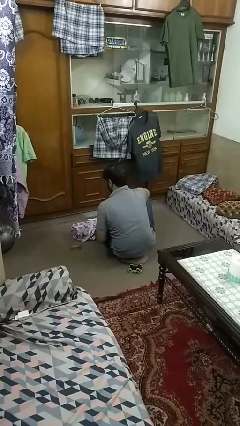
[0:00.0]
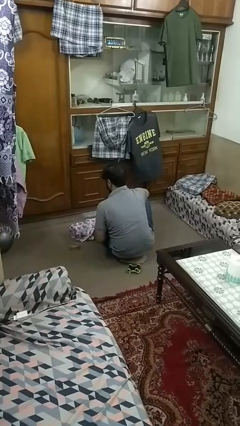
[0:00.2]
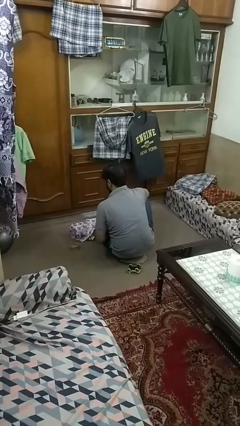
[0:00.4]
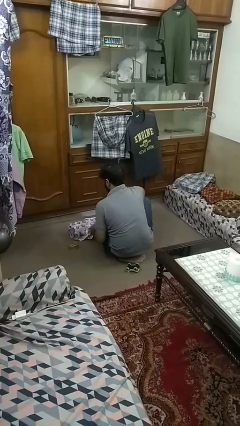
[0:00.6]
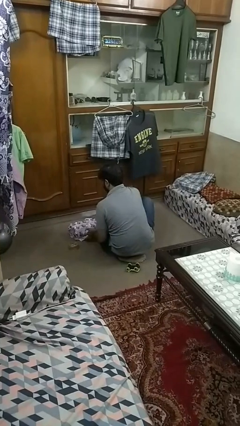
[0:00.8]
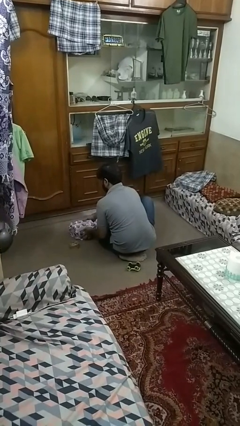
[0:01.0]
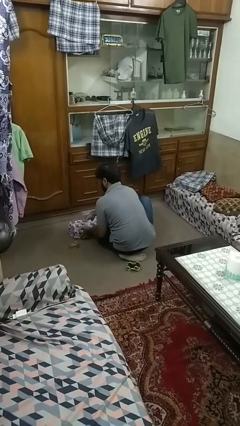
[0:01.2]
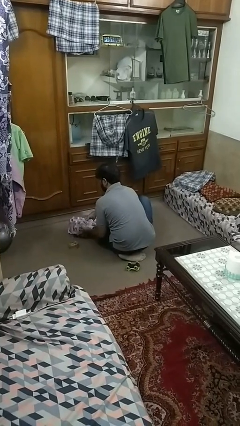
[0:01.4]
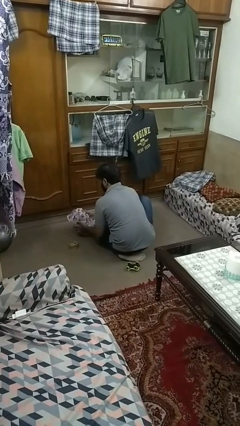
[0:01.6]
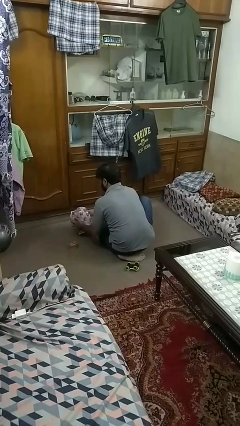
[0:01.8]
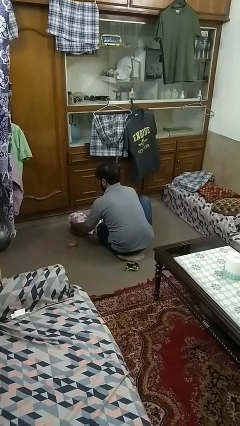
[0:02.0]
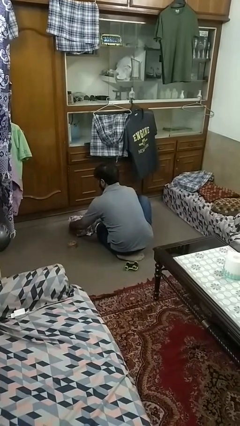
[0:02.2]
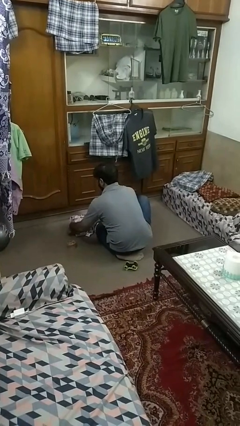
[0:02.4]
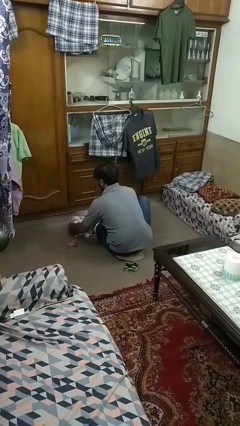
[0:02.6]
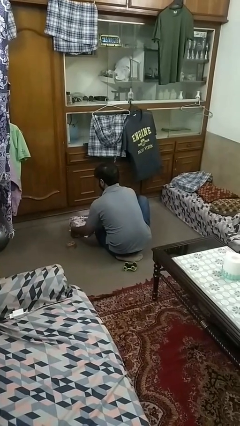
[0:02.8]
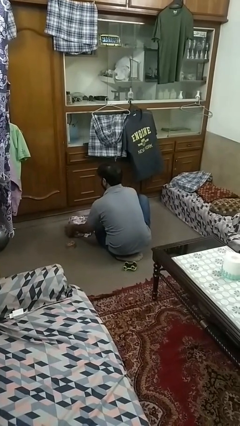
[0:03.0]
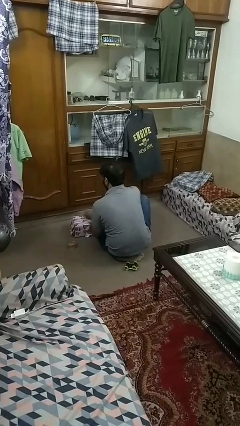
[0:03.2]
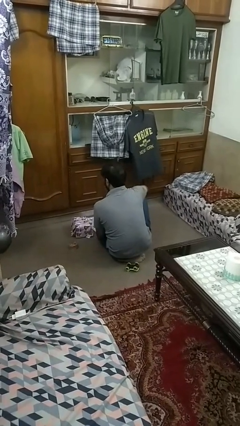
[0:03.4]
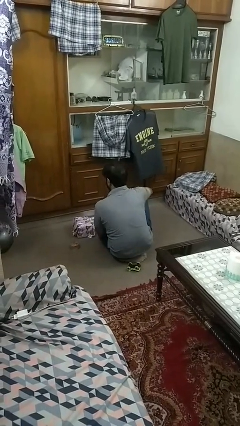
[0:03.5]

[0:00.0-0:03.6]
person wraps box

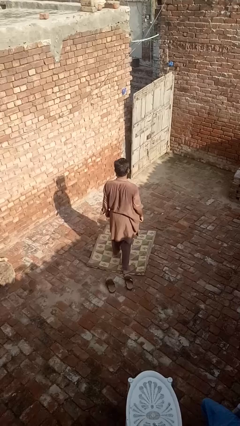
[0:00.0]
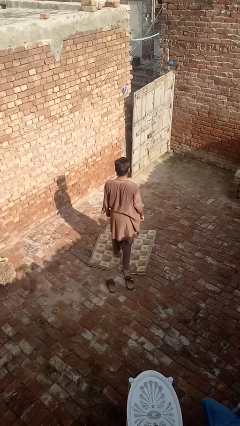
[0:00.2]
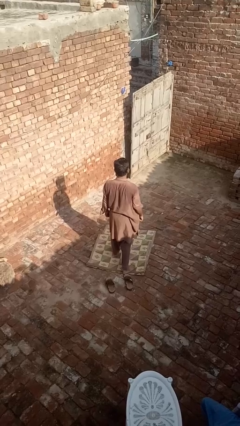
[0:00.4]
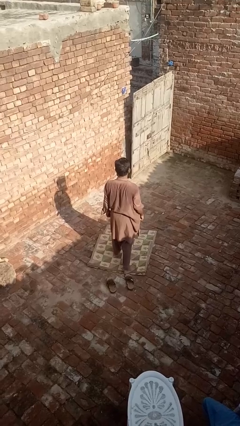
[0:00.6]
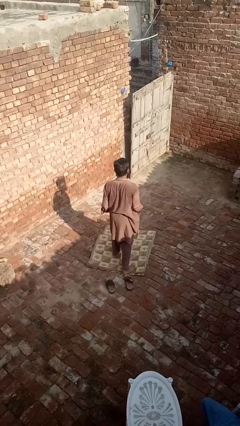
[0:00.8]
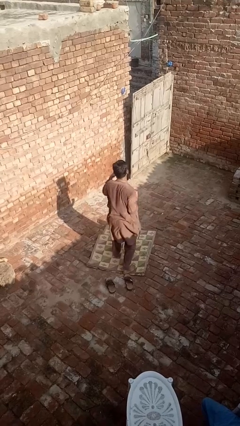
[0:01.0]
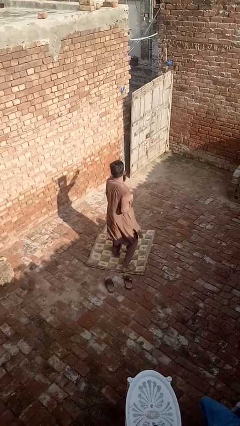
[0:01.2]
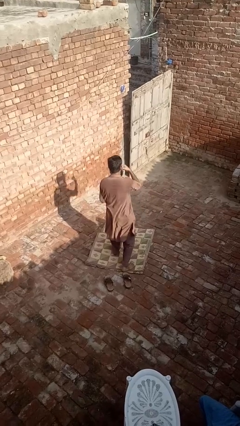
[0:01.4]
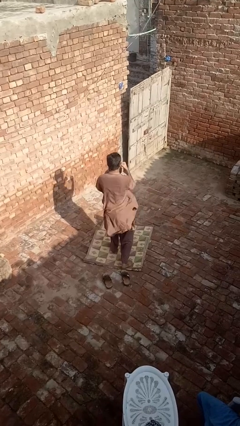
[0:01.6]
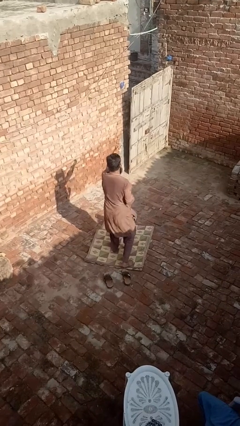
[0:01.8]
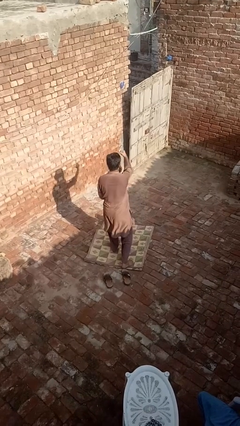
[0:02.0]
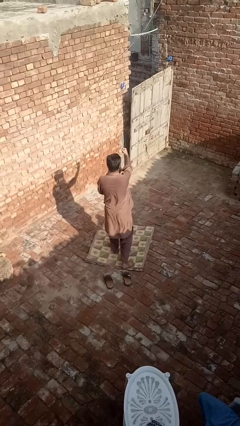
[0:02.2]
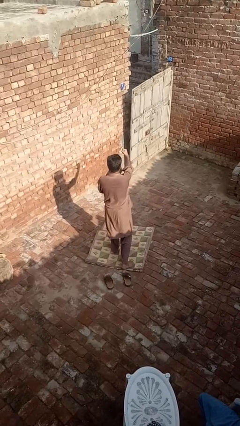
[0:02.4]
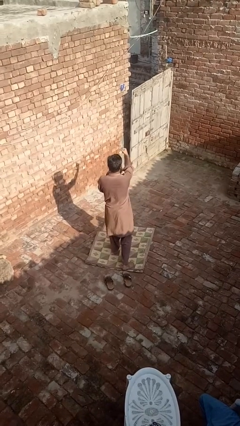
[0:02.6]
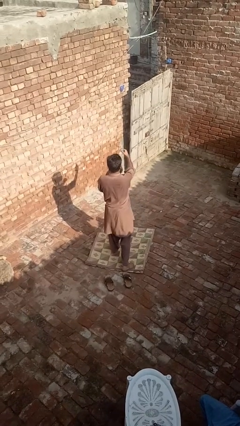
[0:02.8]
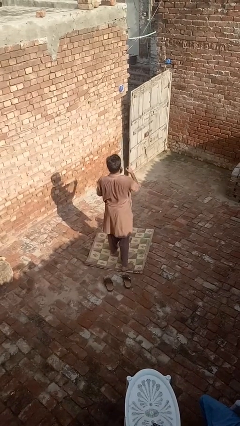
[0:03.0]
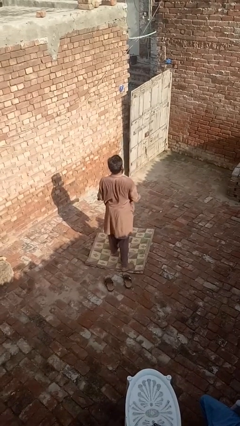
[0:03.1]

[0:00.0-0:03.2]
person punches

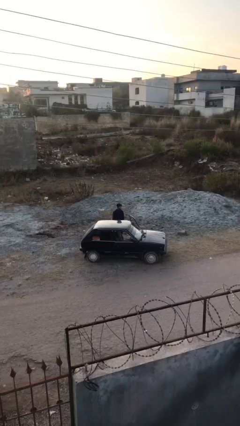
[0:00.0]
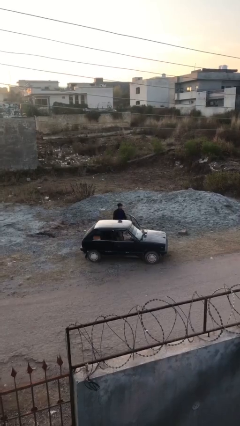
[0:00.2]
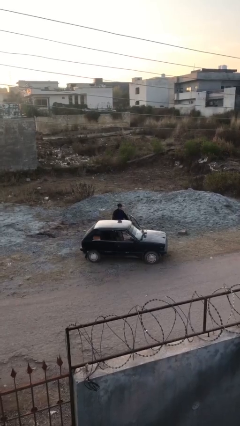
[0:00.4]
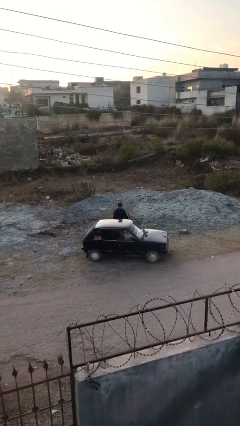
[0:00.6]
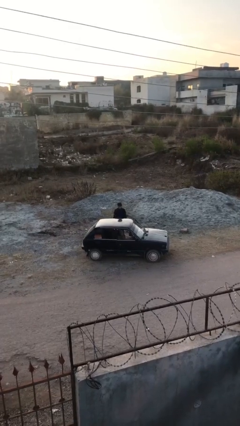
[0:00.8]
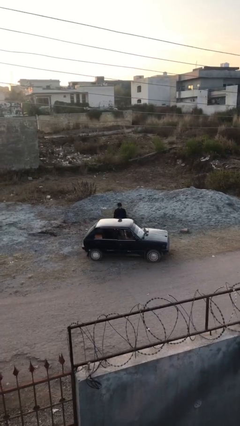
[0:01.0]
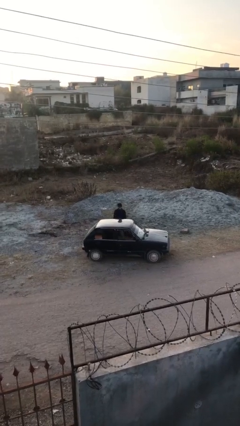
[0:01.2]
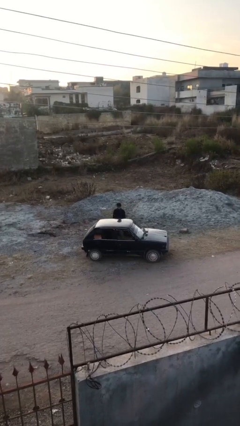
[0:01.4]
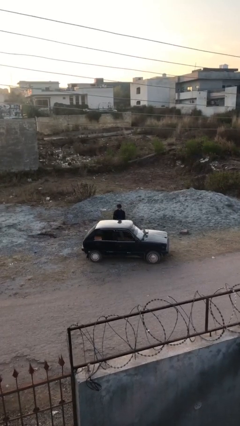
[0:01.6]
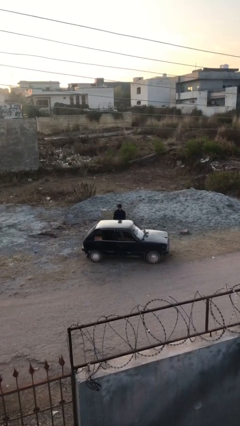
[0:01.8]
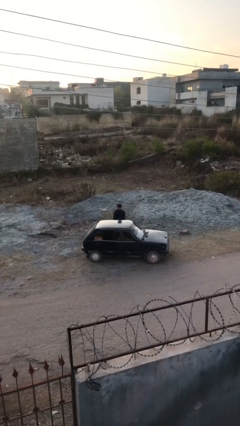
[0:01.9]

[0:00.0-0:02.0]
person closes car door

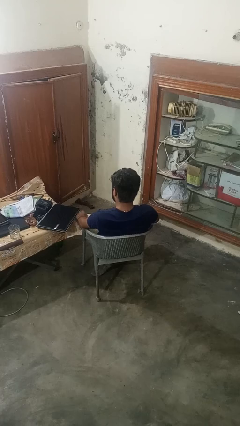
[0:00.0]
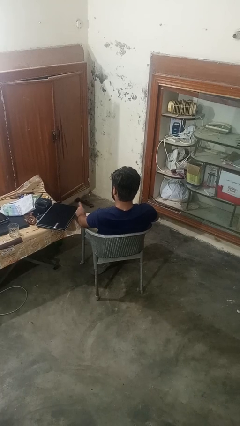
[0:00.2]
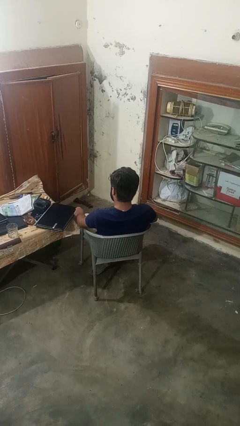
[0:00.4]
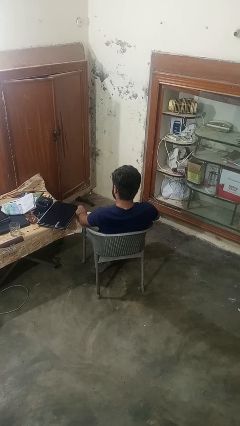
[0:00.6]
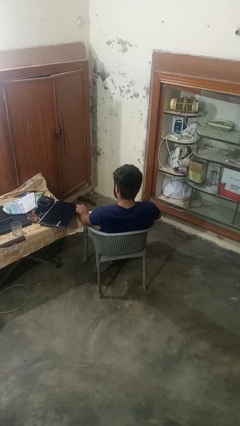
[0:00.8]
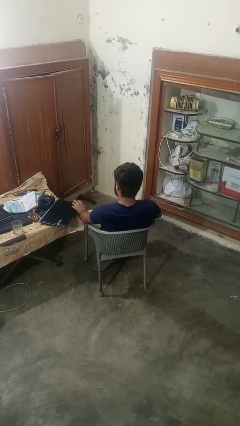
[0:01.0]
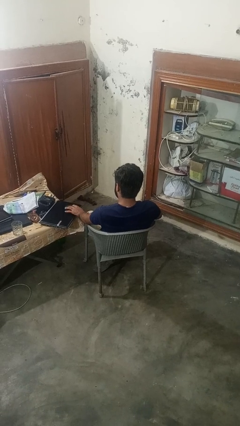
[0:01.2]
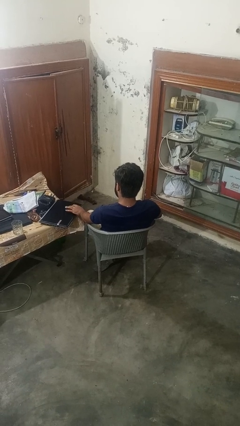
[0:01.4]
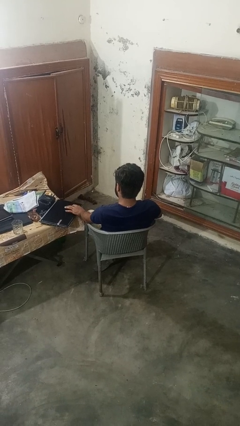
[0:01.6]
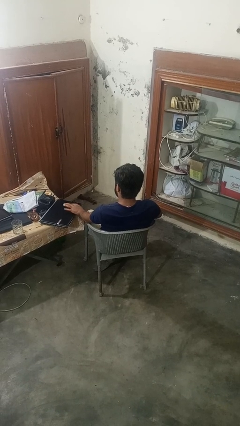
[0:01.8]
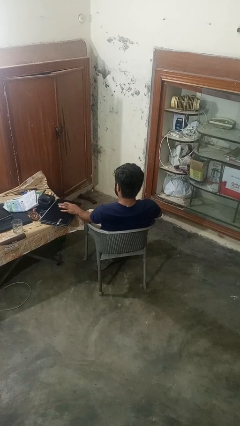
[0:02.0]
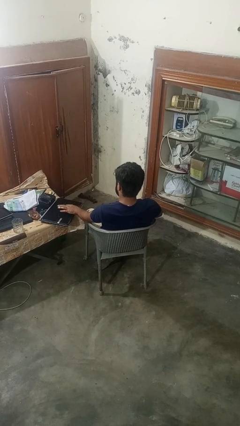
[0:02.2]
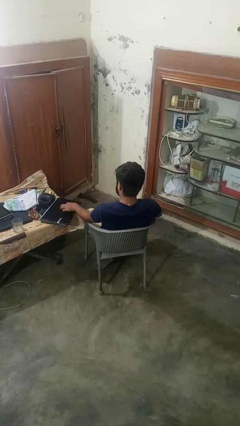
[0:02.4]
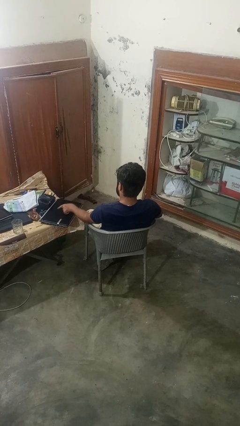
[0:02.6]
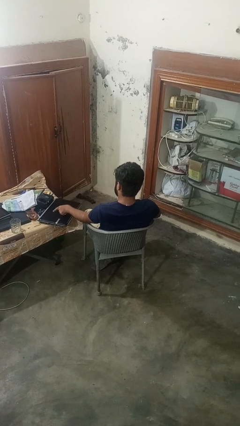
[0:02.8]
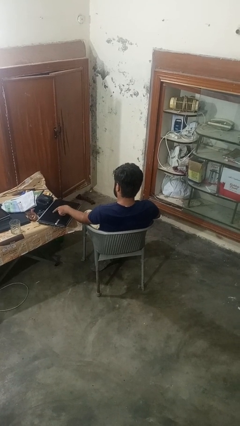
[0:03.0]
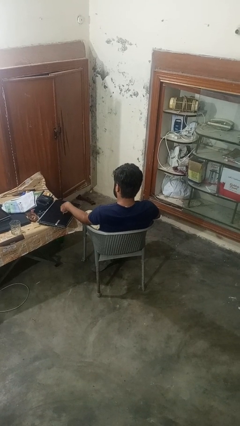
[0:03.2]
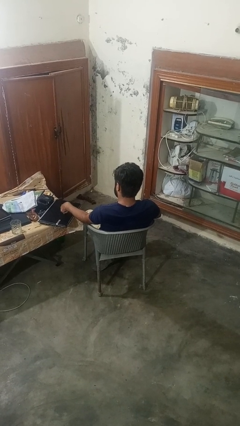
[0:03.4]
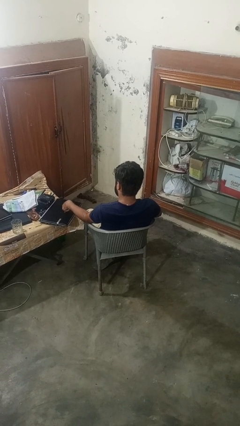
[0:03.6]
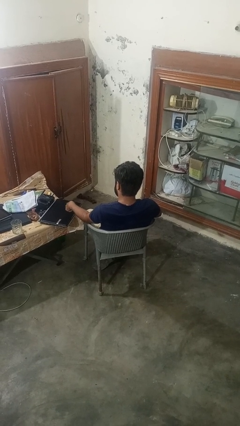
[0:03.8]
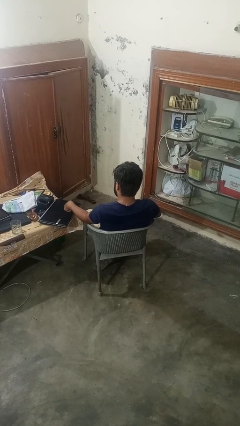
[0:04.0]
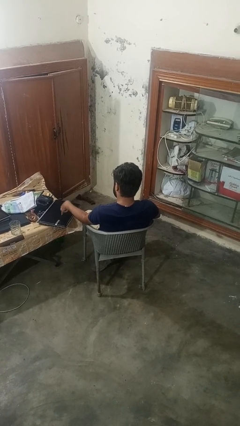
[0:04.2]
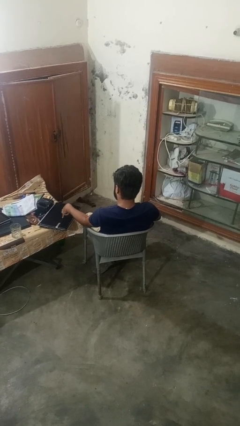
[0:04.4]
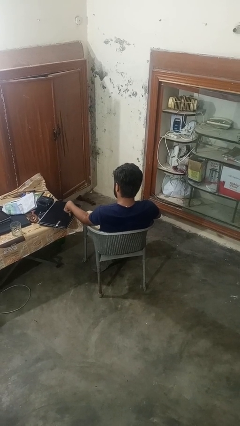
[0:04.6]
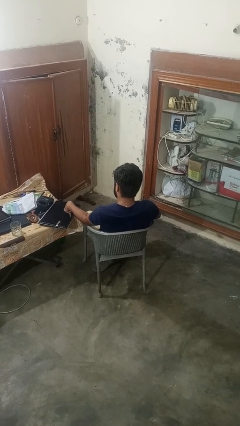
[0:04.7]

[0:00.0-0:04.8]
person taps object with finger

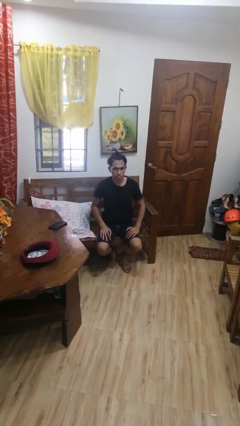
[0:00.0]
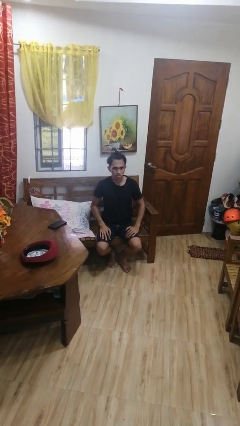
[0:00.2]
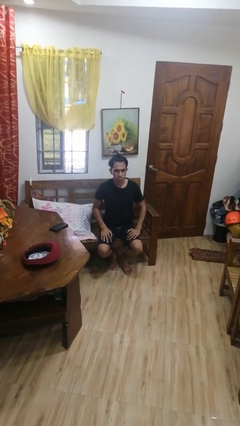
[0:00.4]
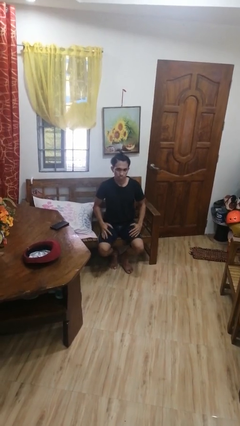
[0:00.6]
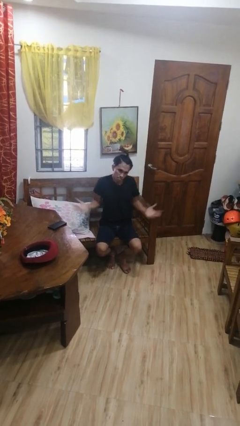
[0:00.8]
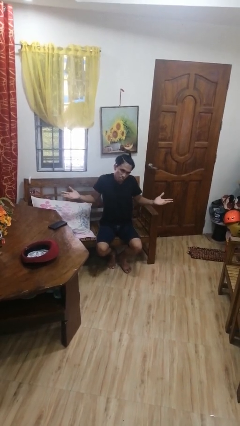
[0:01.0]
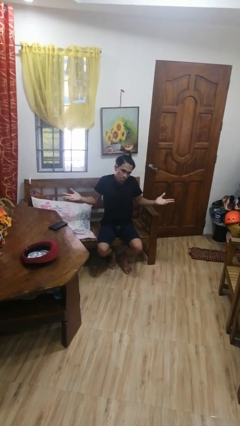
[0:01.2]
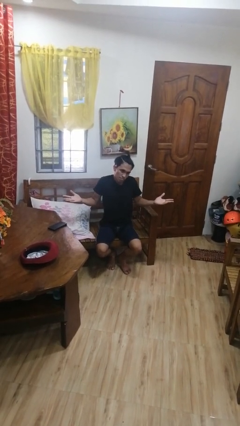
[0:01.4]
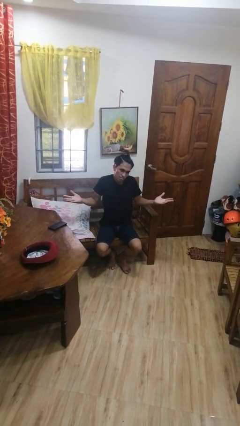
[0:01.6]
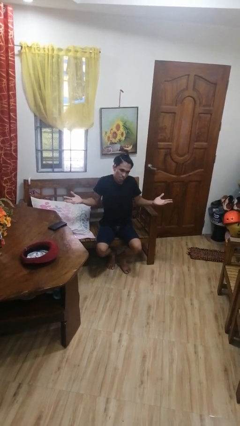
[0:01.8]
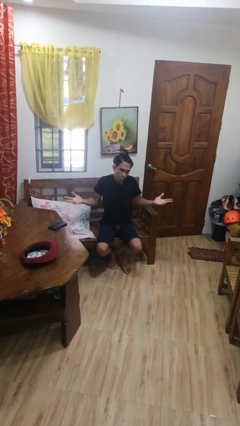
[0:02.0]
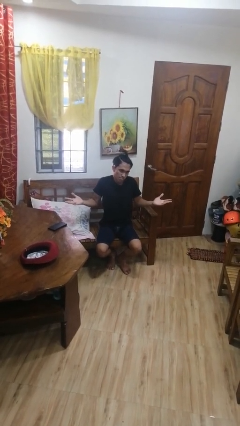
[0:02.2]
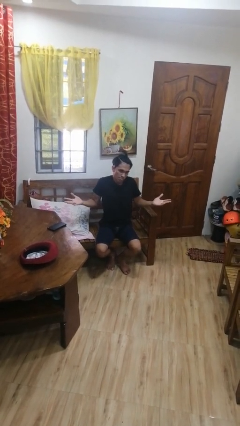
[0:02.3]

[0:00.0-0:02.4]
person shrugs

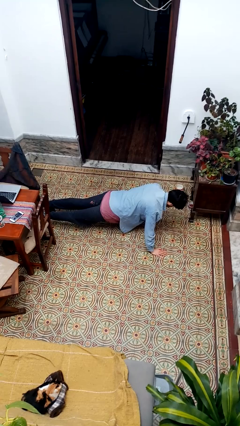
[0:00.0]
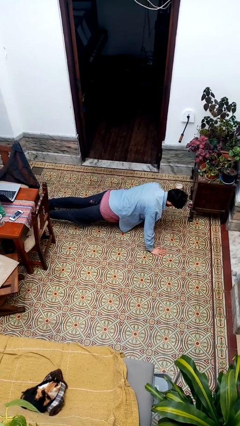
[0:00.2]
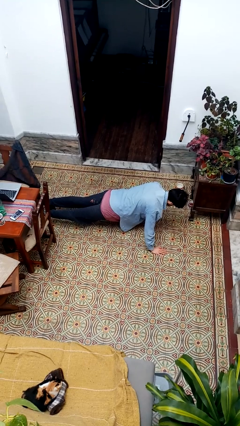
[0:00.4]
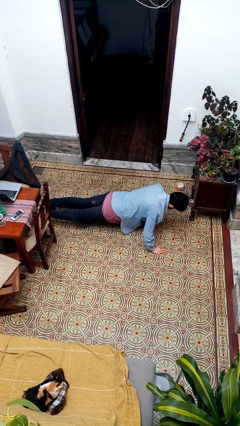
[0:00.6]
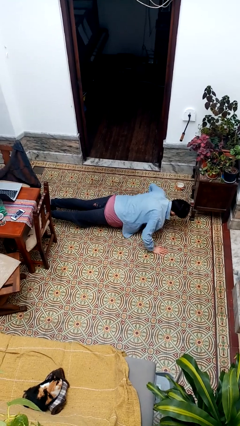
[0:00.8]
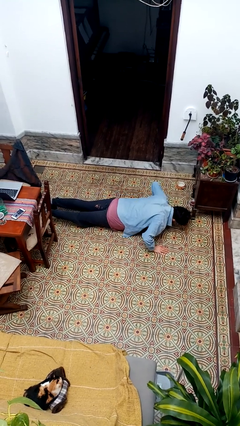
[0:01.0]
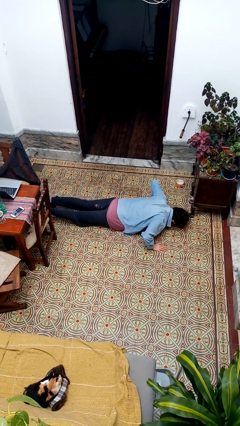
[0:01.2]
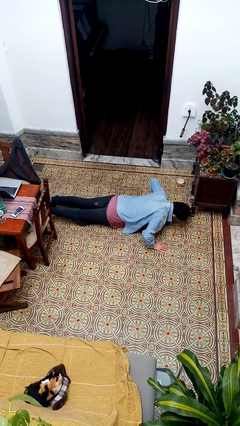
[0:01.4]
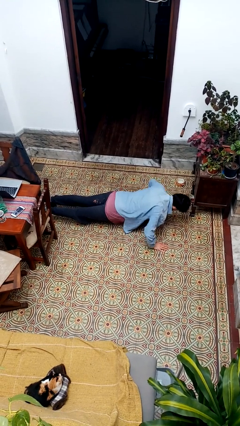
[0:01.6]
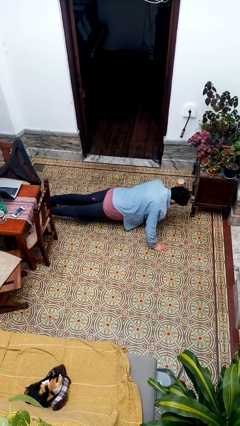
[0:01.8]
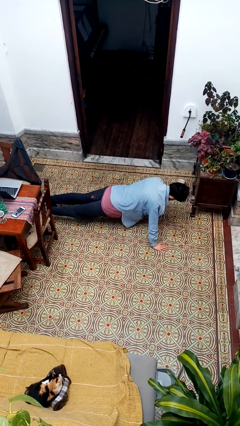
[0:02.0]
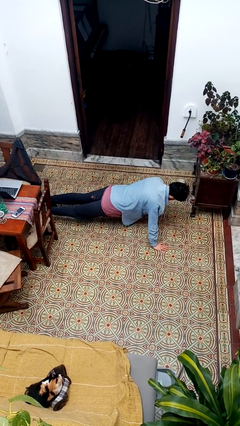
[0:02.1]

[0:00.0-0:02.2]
person exercises with pushup
